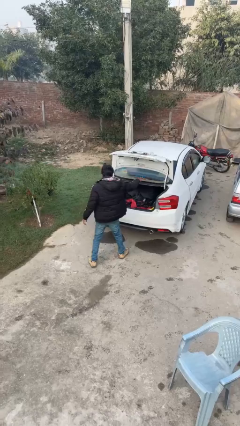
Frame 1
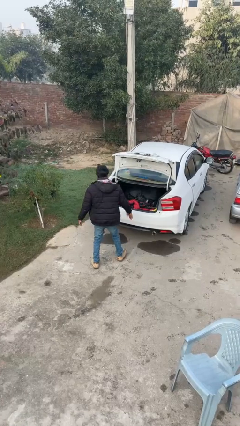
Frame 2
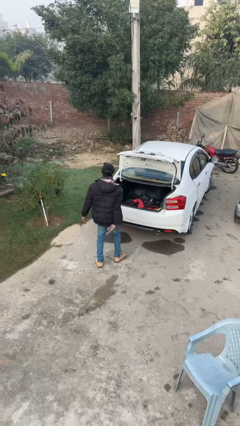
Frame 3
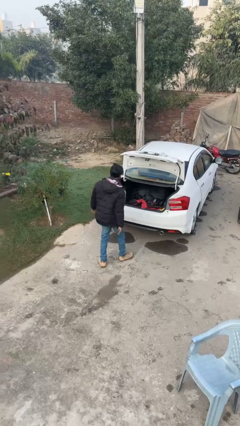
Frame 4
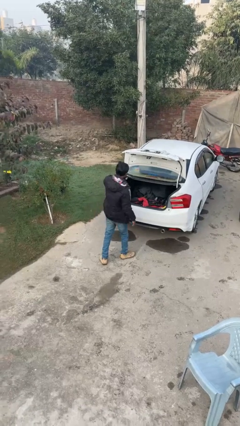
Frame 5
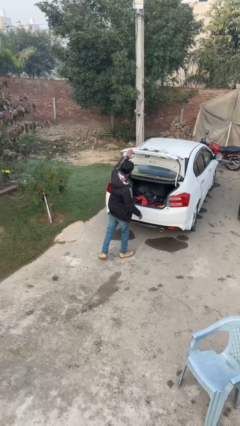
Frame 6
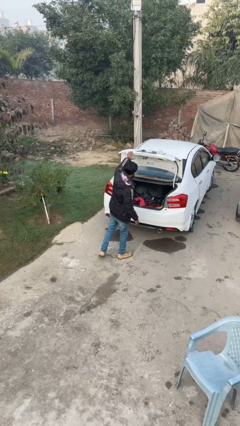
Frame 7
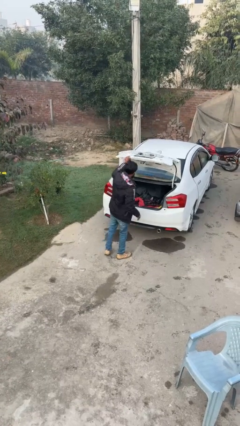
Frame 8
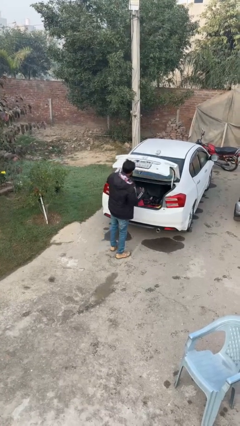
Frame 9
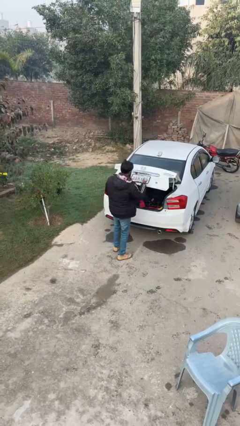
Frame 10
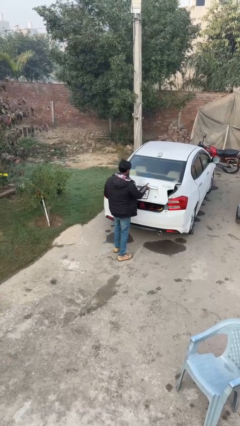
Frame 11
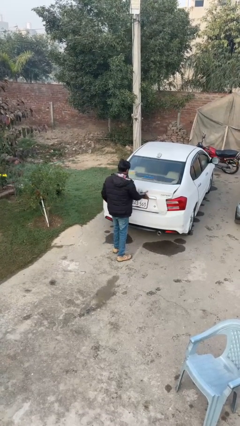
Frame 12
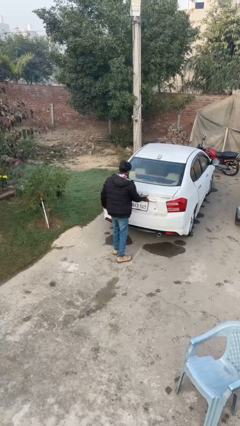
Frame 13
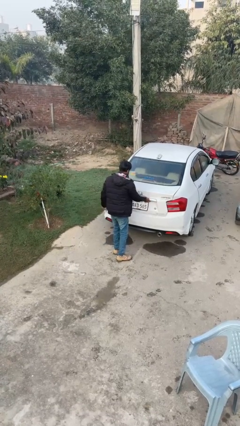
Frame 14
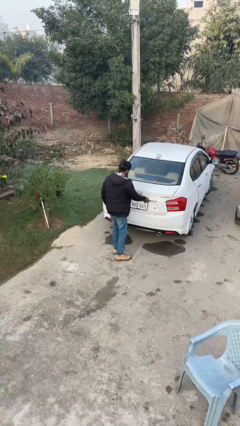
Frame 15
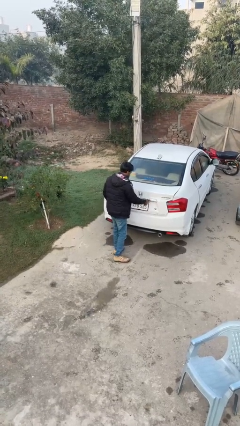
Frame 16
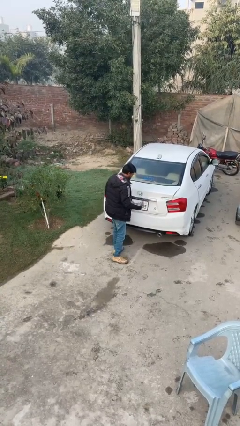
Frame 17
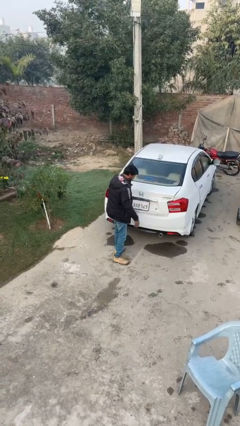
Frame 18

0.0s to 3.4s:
person closes car trunk

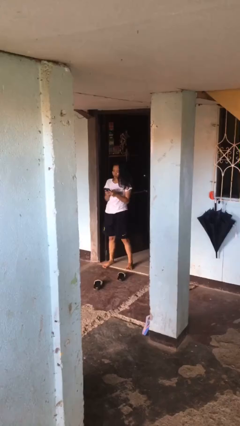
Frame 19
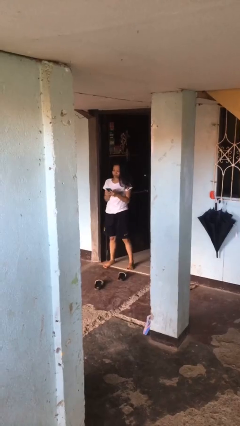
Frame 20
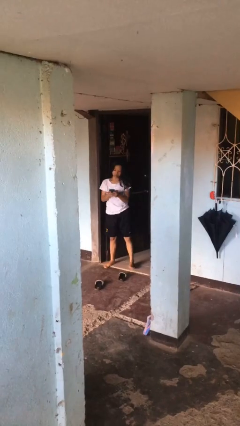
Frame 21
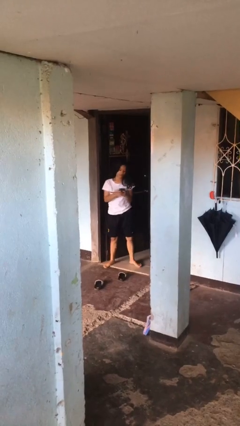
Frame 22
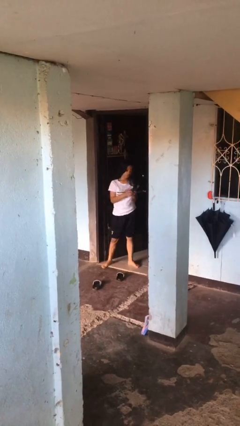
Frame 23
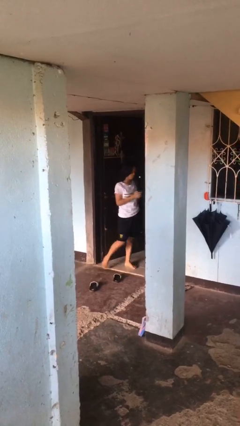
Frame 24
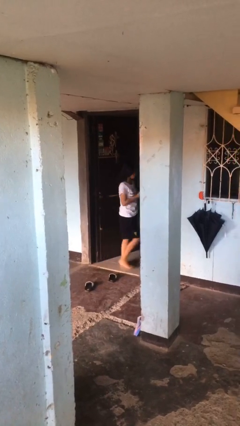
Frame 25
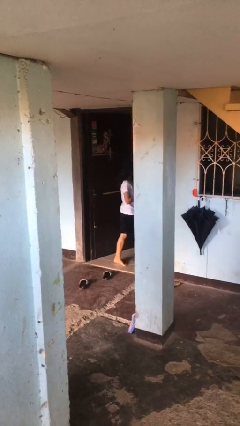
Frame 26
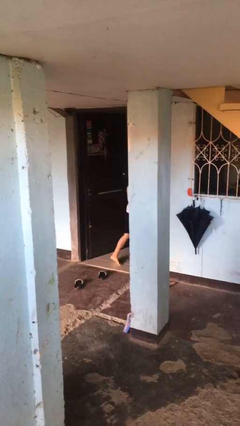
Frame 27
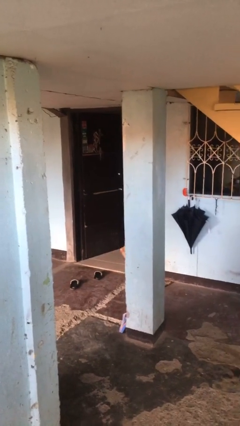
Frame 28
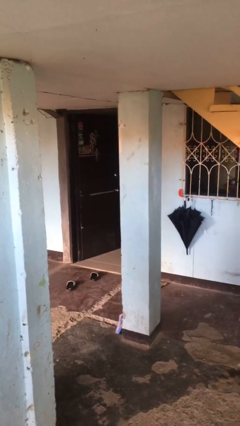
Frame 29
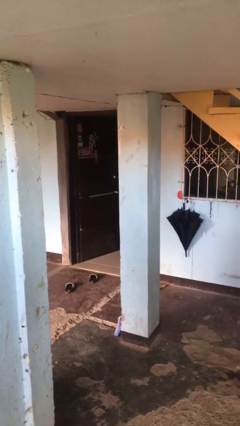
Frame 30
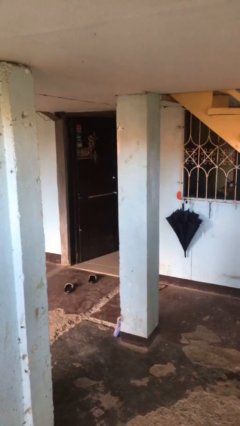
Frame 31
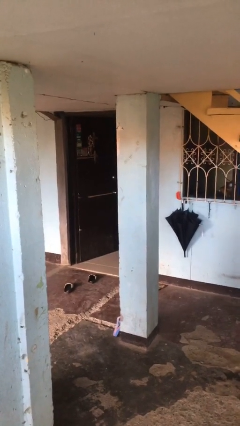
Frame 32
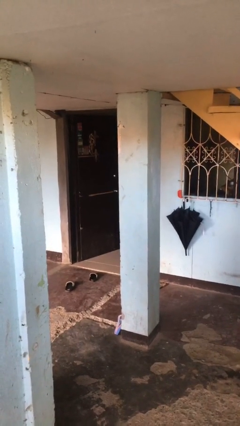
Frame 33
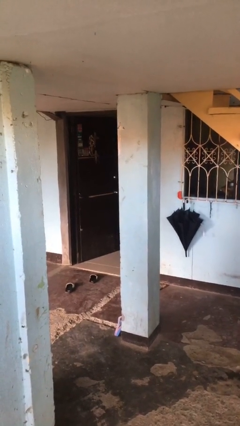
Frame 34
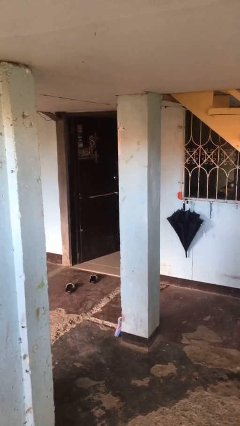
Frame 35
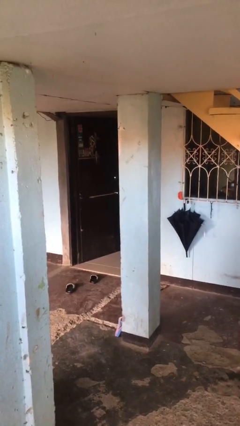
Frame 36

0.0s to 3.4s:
person exits scene through structure

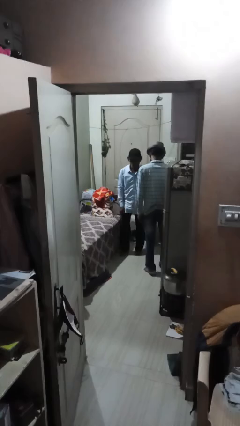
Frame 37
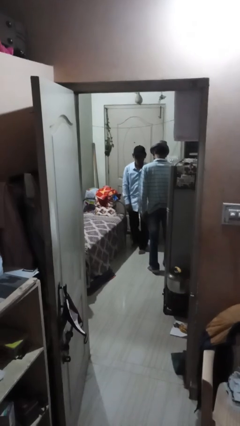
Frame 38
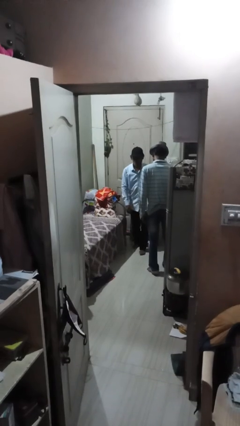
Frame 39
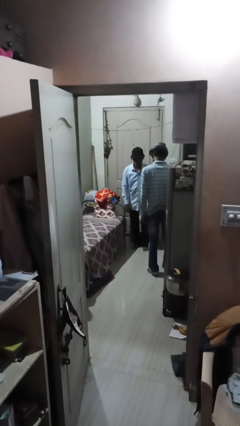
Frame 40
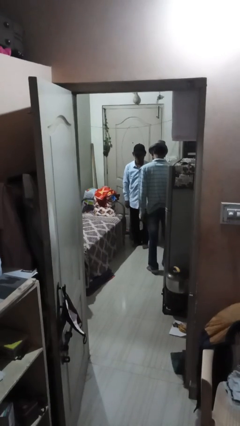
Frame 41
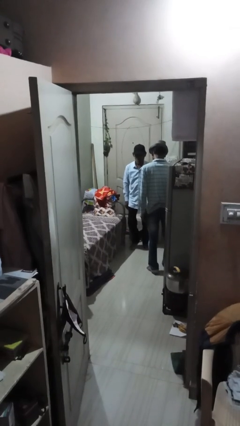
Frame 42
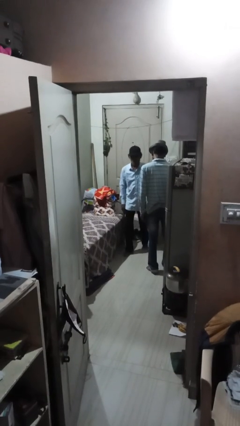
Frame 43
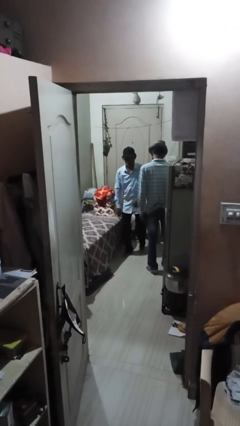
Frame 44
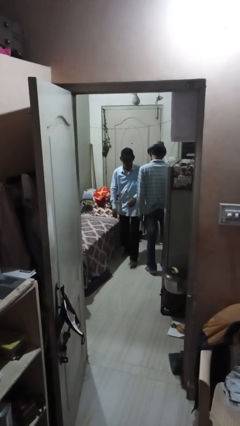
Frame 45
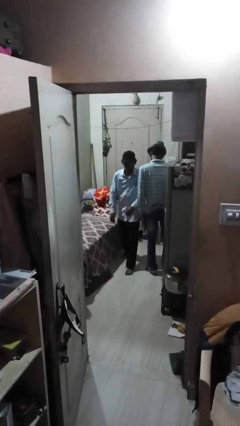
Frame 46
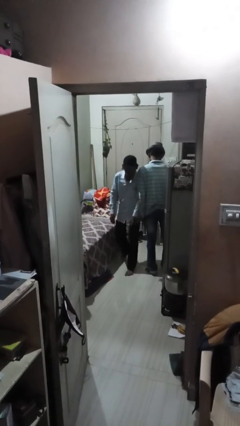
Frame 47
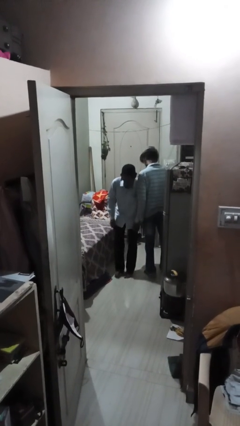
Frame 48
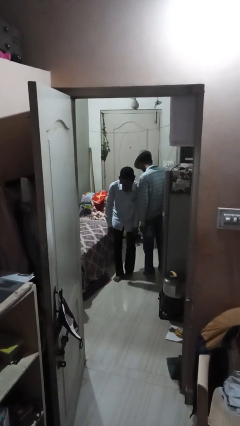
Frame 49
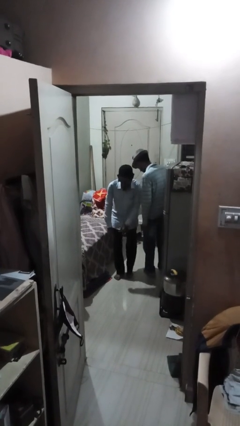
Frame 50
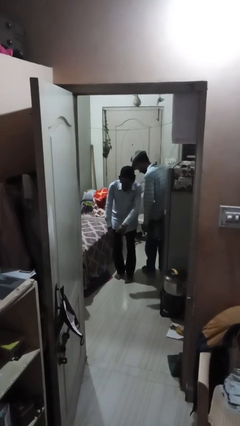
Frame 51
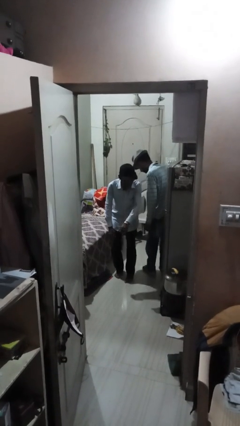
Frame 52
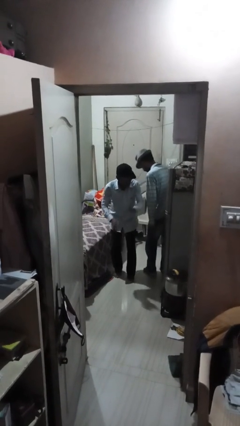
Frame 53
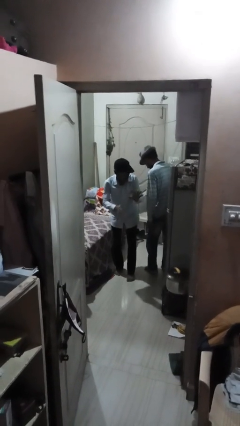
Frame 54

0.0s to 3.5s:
person bumps into person

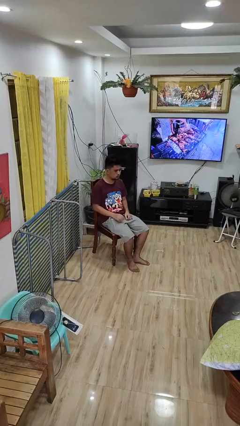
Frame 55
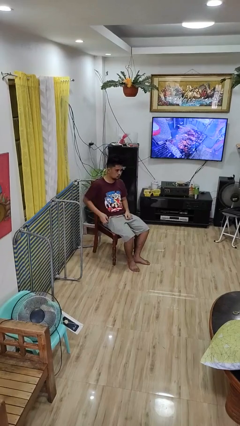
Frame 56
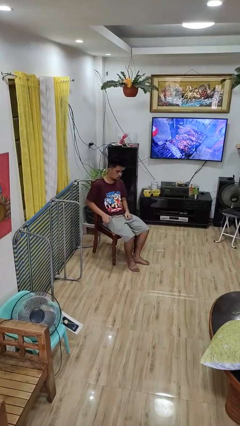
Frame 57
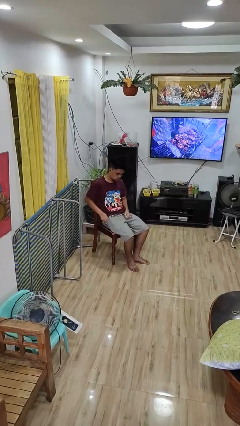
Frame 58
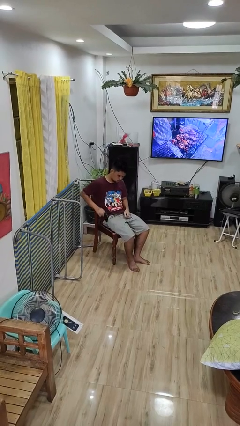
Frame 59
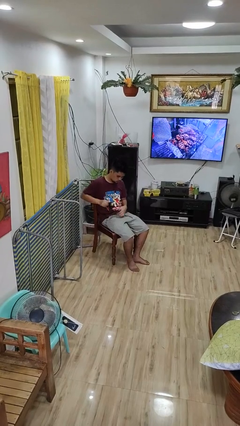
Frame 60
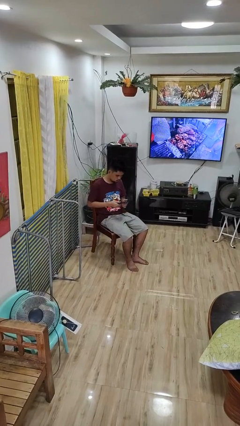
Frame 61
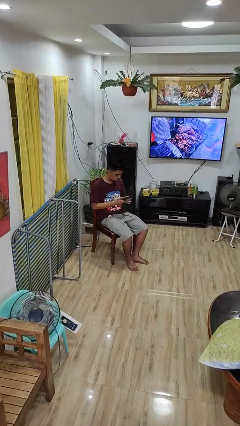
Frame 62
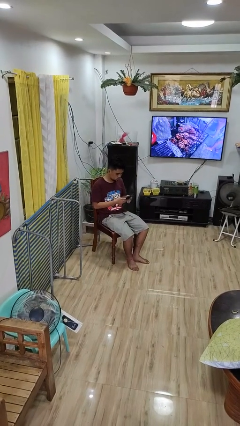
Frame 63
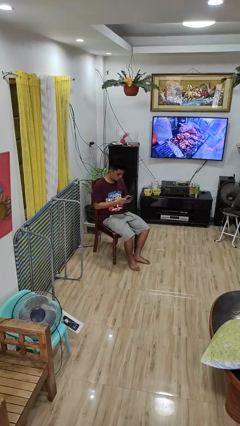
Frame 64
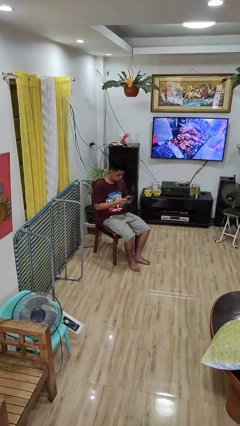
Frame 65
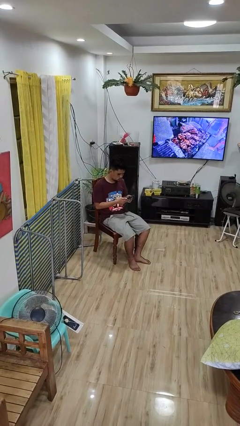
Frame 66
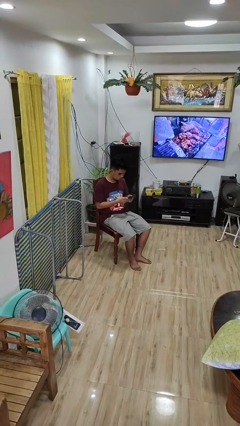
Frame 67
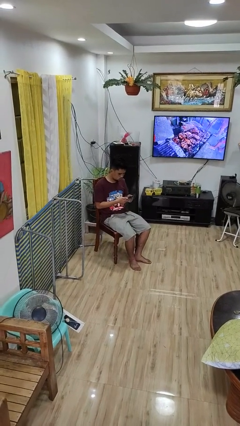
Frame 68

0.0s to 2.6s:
person takes phone from pocket

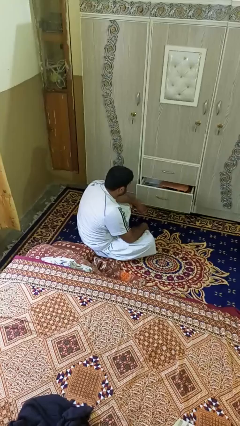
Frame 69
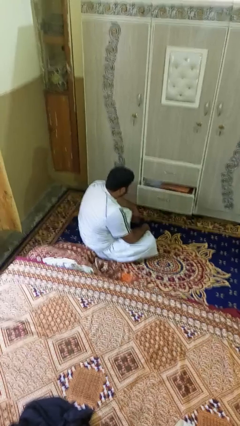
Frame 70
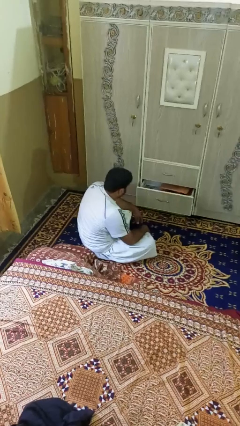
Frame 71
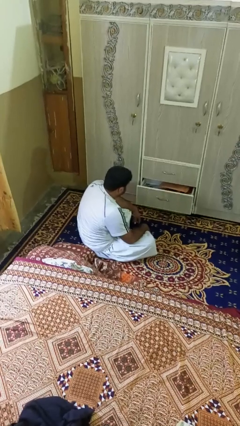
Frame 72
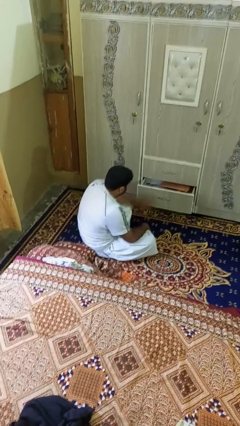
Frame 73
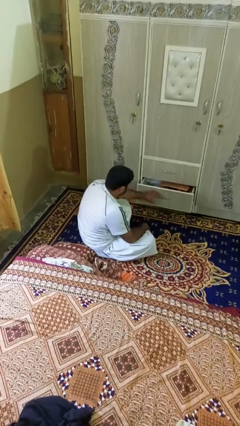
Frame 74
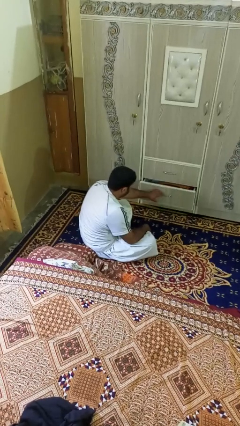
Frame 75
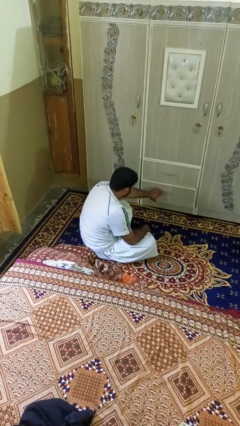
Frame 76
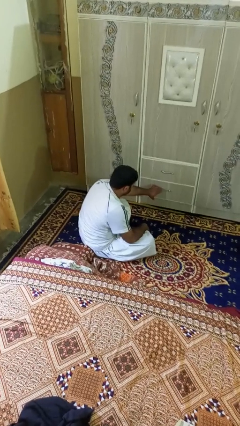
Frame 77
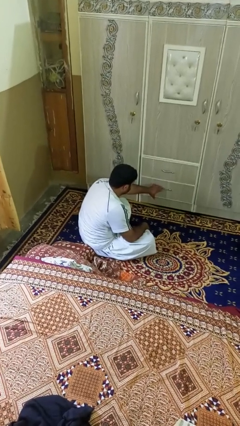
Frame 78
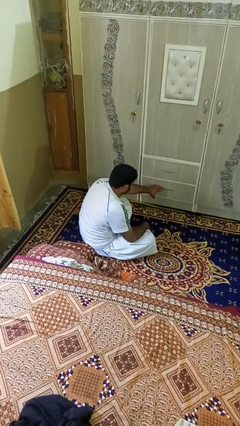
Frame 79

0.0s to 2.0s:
person closes dresser drawer

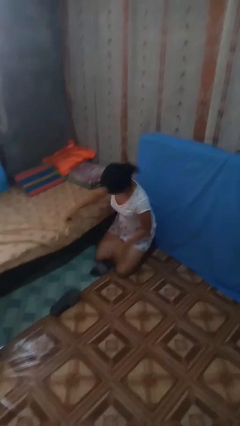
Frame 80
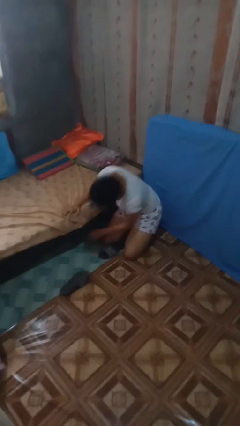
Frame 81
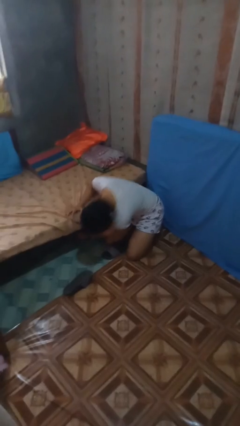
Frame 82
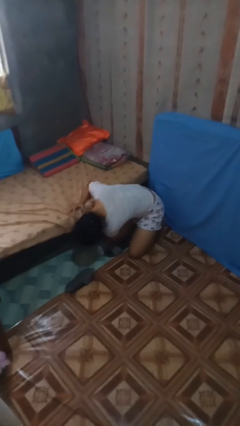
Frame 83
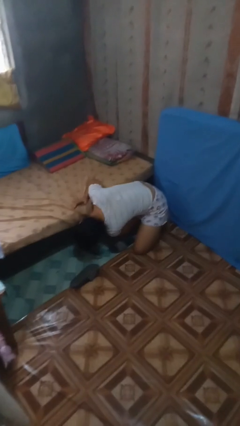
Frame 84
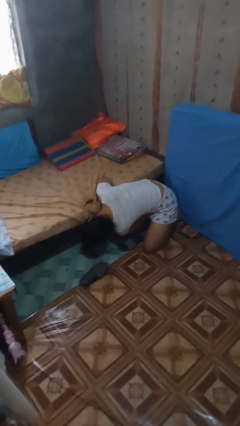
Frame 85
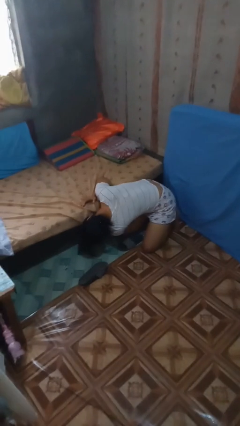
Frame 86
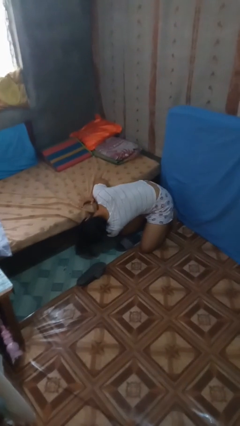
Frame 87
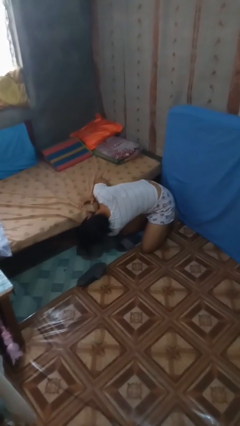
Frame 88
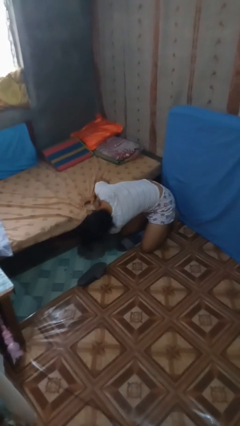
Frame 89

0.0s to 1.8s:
person searches under bed

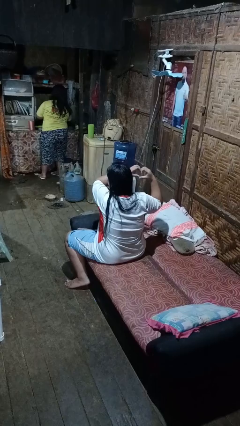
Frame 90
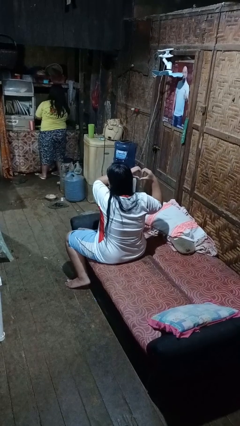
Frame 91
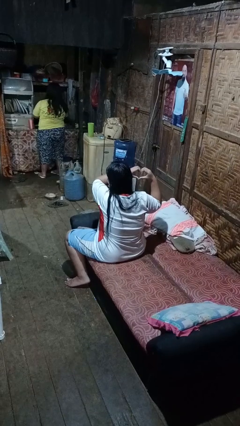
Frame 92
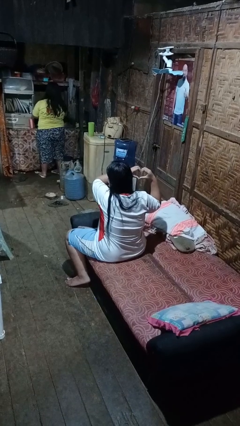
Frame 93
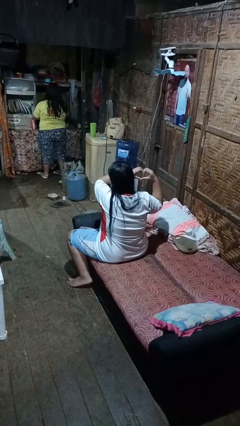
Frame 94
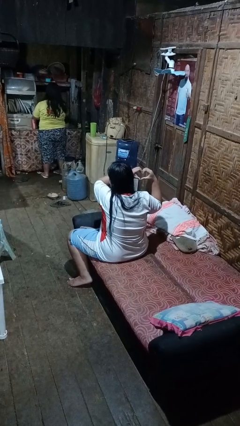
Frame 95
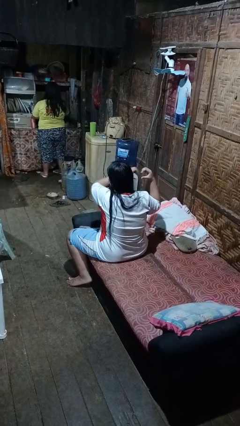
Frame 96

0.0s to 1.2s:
person gestures heart
